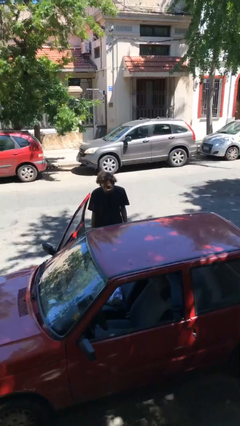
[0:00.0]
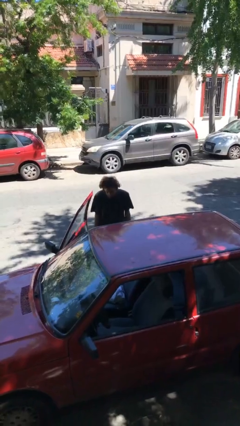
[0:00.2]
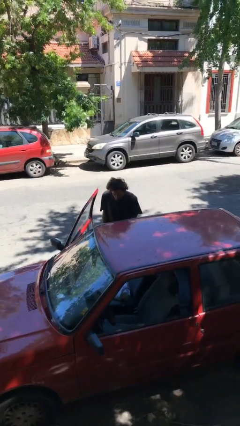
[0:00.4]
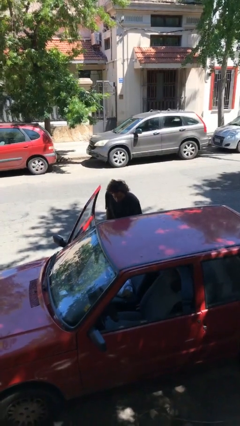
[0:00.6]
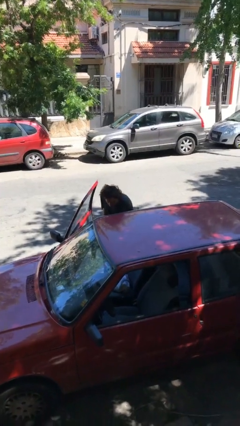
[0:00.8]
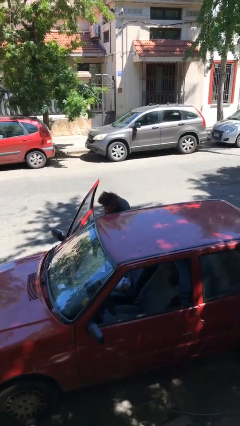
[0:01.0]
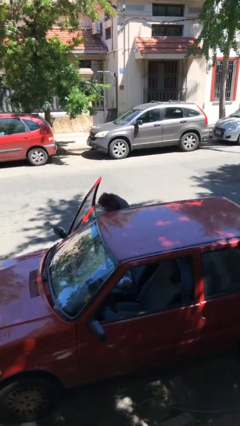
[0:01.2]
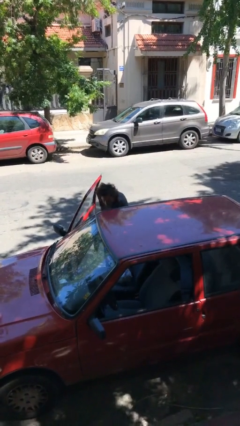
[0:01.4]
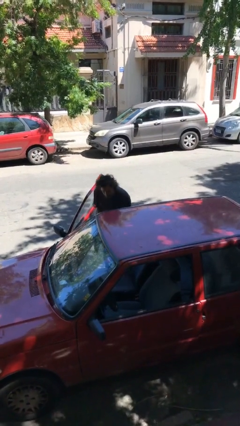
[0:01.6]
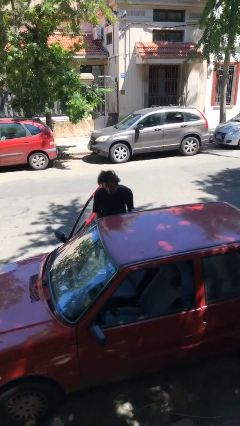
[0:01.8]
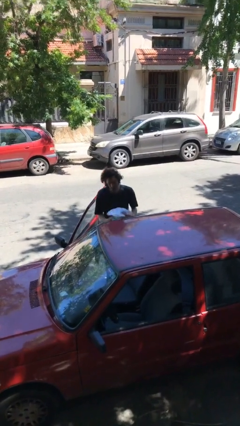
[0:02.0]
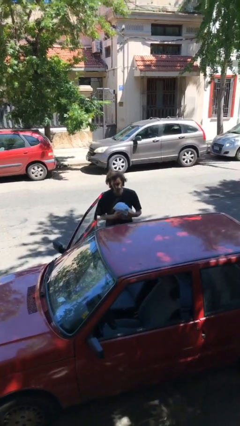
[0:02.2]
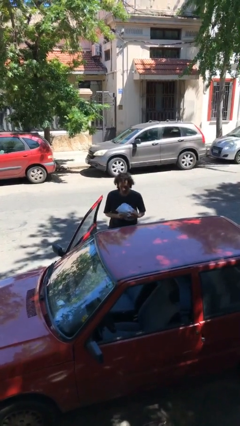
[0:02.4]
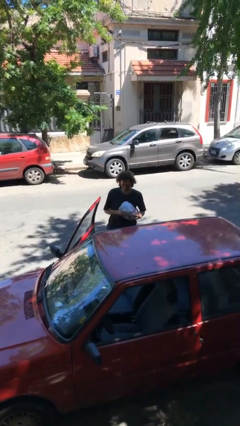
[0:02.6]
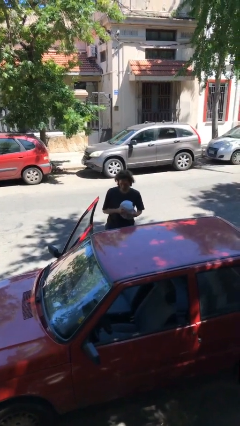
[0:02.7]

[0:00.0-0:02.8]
person unloads car

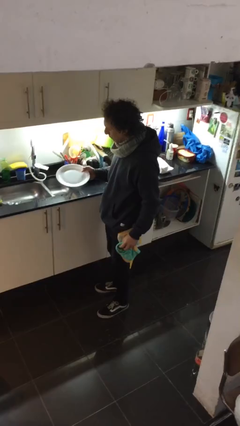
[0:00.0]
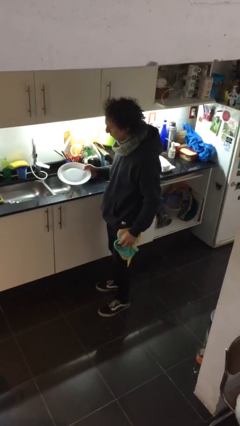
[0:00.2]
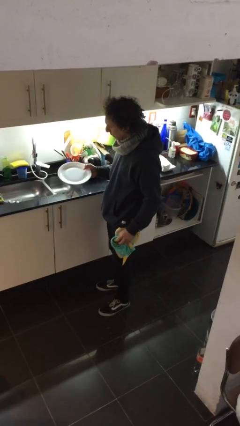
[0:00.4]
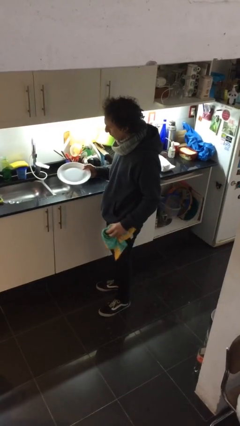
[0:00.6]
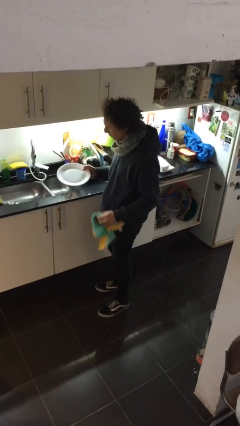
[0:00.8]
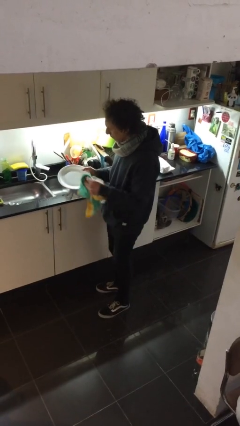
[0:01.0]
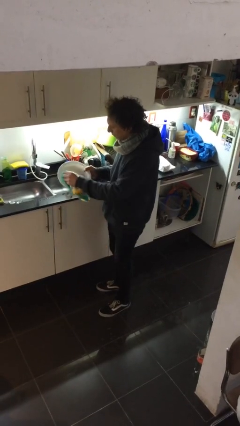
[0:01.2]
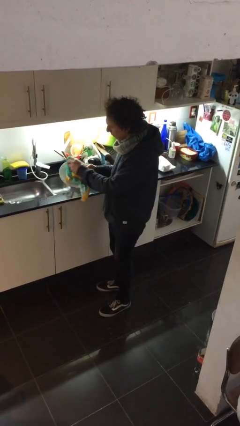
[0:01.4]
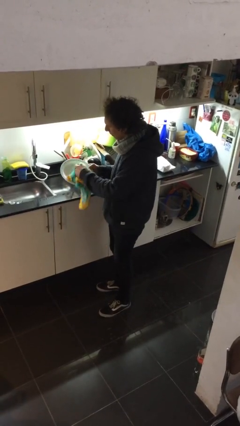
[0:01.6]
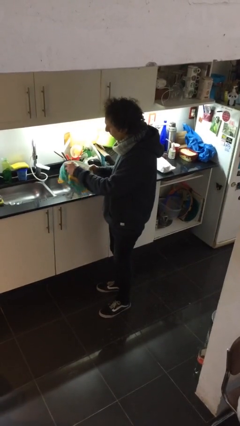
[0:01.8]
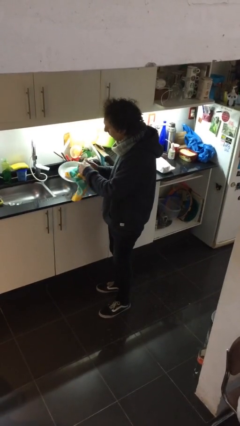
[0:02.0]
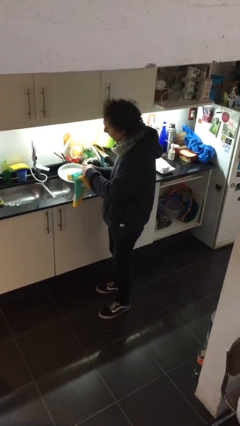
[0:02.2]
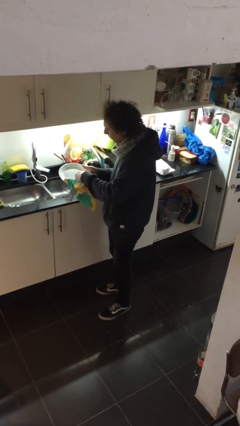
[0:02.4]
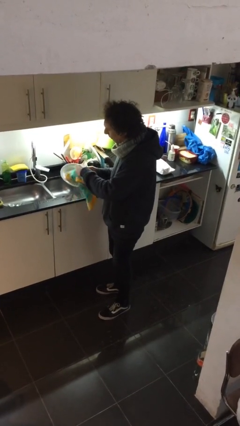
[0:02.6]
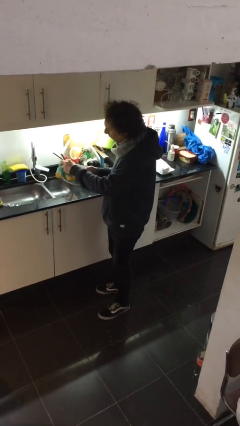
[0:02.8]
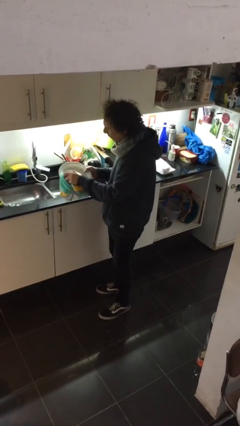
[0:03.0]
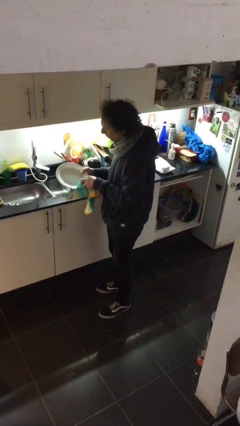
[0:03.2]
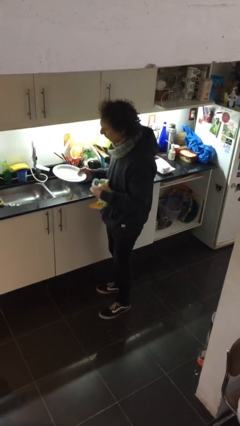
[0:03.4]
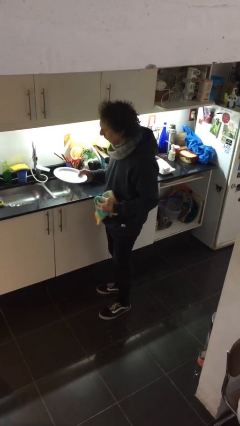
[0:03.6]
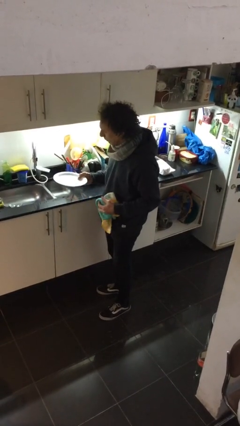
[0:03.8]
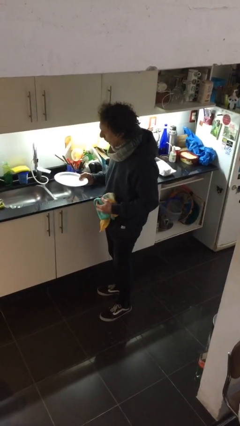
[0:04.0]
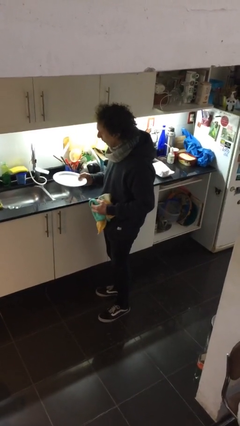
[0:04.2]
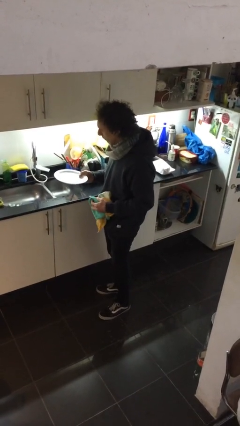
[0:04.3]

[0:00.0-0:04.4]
person dries dish

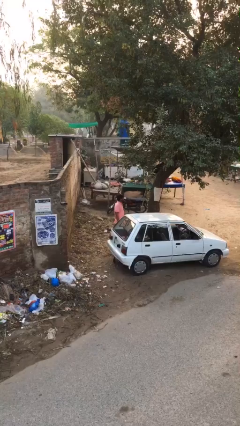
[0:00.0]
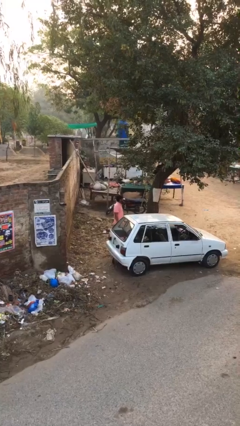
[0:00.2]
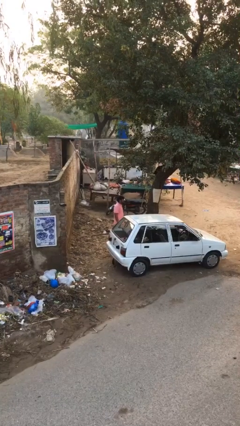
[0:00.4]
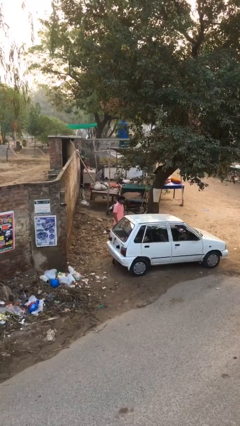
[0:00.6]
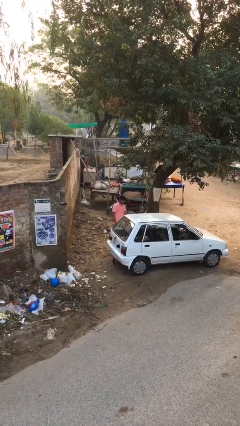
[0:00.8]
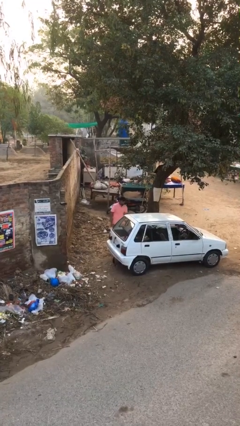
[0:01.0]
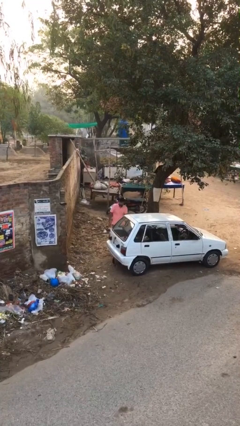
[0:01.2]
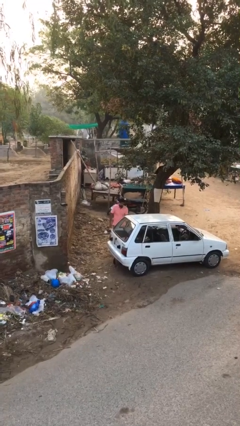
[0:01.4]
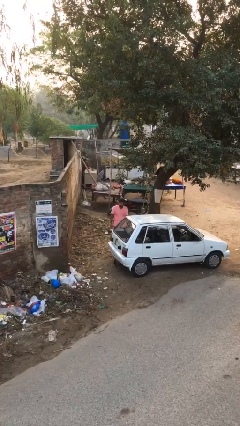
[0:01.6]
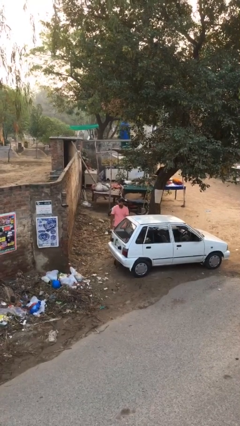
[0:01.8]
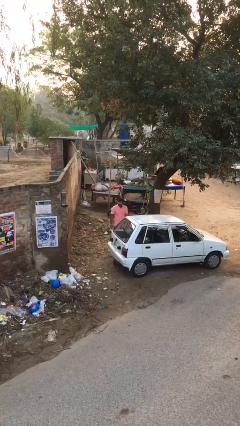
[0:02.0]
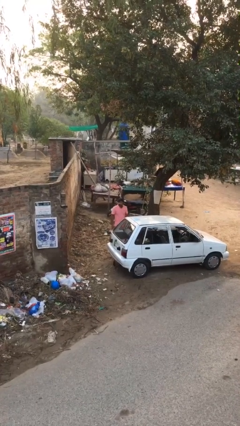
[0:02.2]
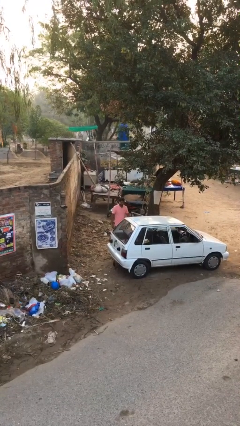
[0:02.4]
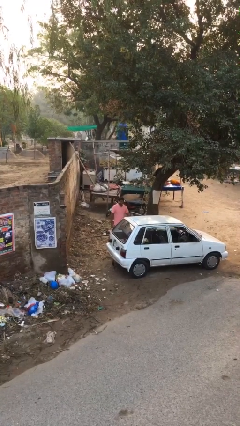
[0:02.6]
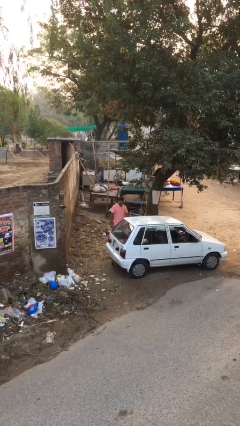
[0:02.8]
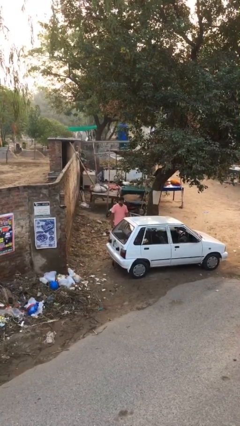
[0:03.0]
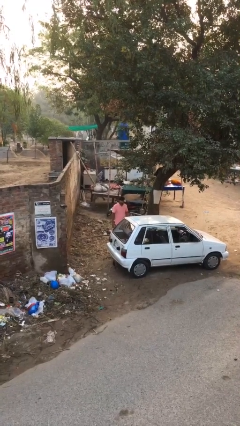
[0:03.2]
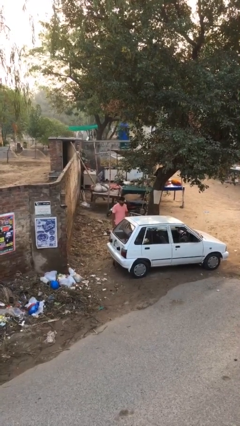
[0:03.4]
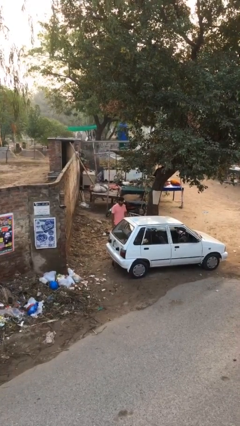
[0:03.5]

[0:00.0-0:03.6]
person opens car door

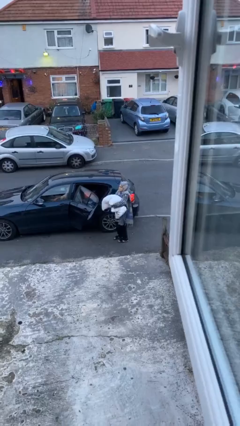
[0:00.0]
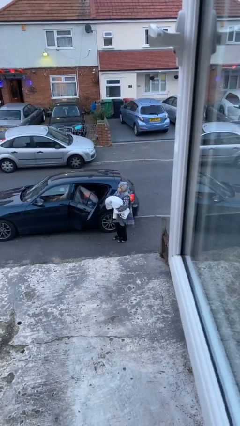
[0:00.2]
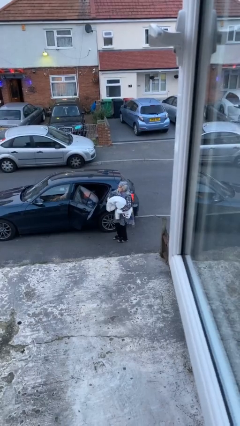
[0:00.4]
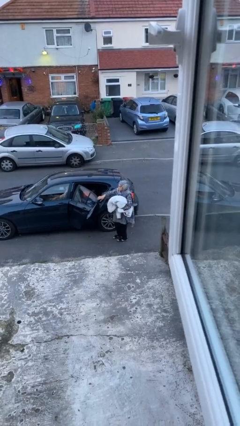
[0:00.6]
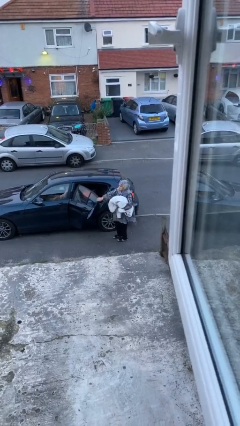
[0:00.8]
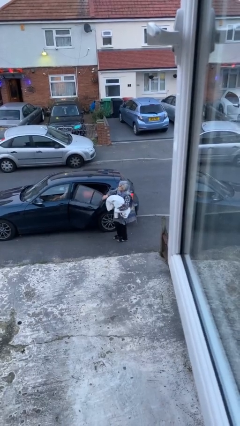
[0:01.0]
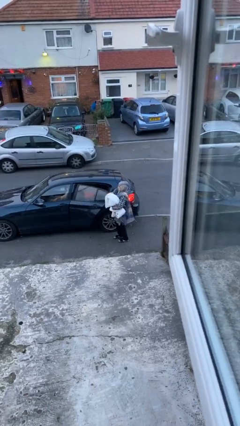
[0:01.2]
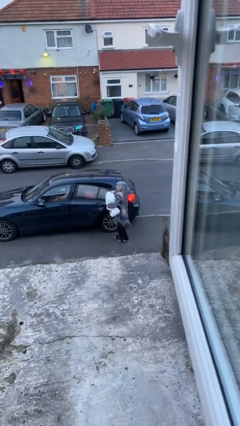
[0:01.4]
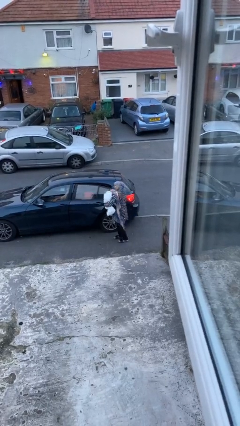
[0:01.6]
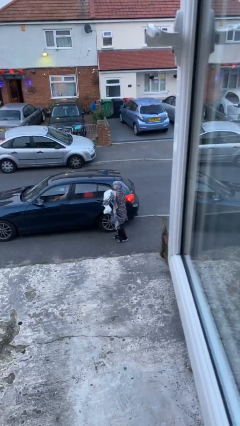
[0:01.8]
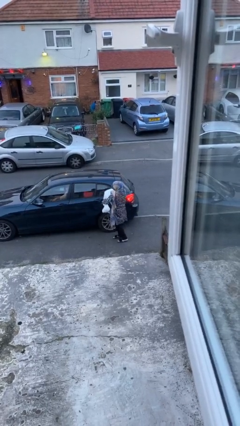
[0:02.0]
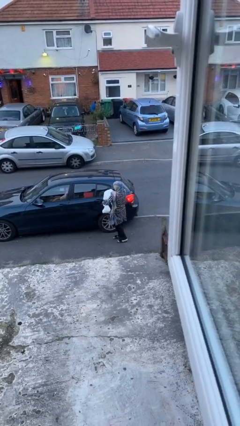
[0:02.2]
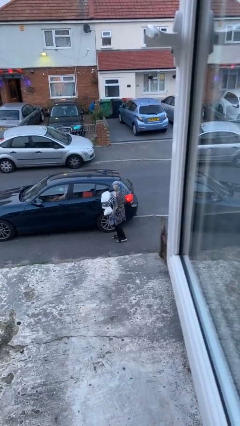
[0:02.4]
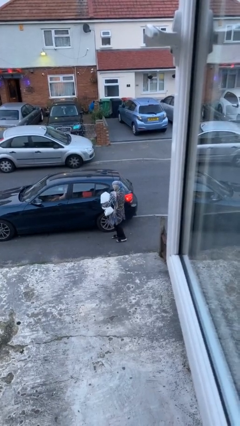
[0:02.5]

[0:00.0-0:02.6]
person closes car door

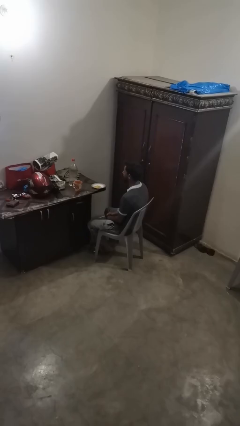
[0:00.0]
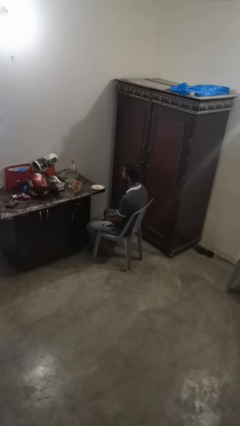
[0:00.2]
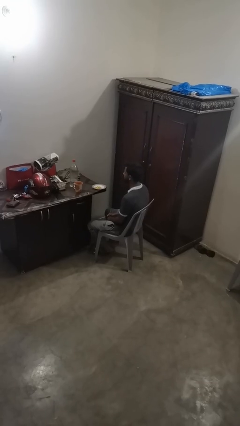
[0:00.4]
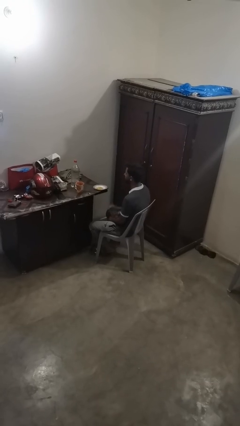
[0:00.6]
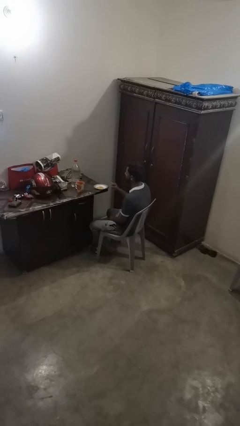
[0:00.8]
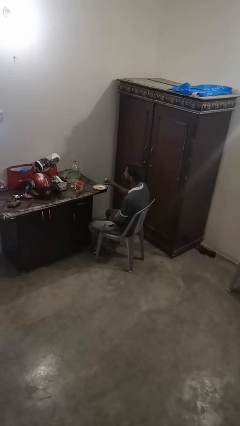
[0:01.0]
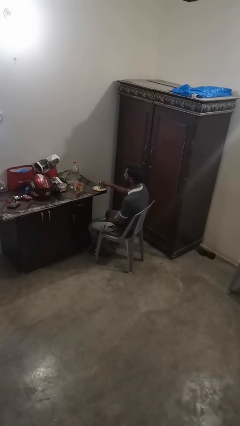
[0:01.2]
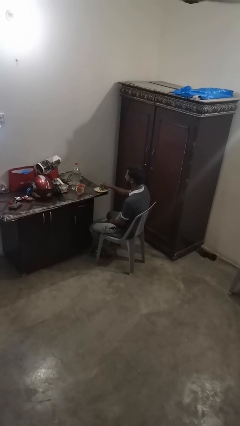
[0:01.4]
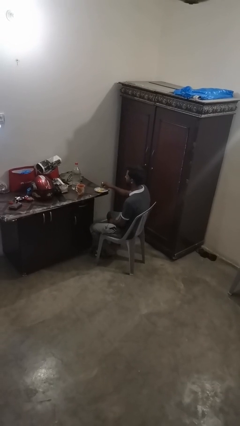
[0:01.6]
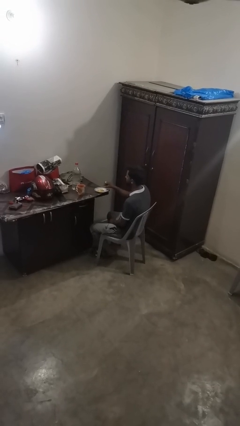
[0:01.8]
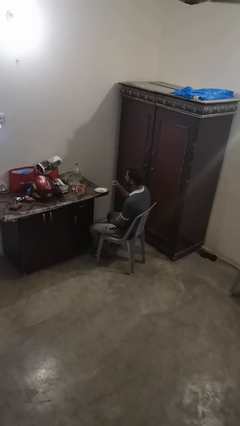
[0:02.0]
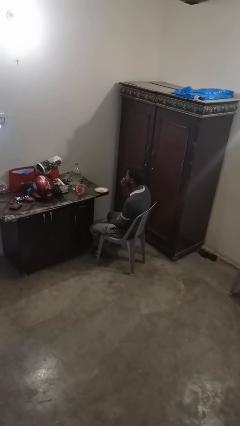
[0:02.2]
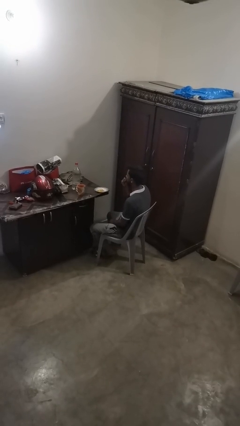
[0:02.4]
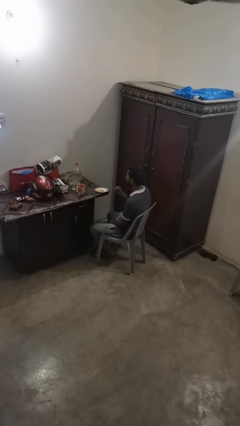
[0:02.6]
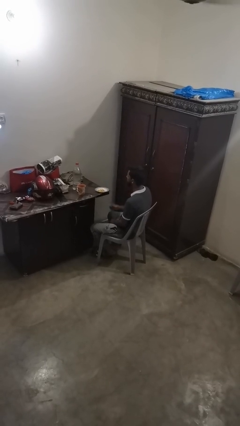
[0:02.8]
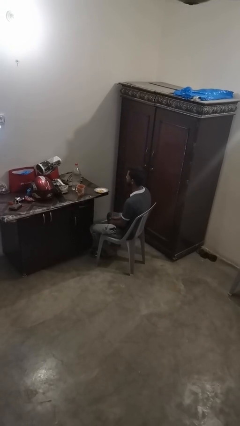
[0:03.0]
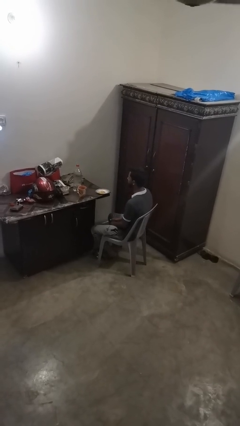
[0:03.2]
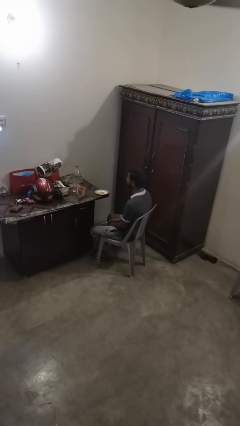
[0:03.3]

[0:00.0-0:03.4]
person eats with hands

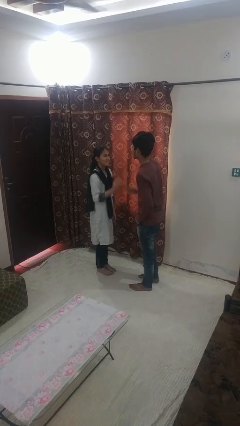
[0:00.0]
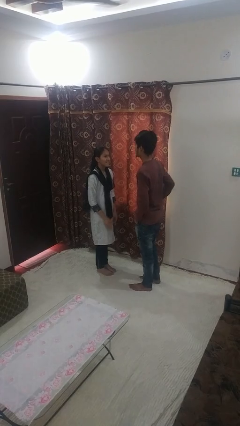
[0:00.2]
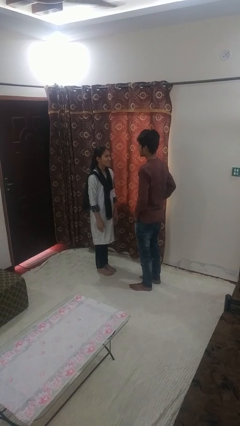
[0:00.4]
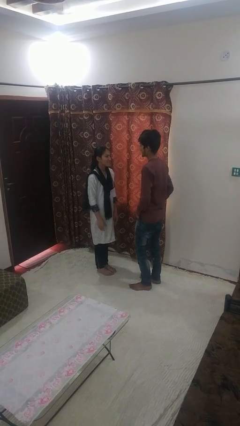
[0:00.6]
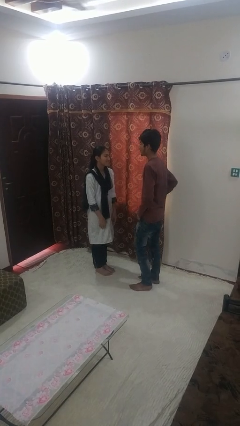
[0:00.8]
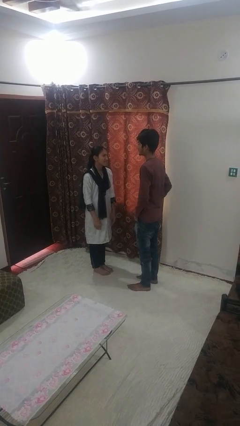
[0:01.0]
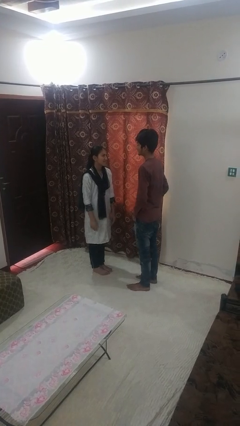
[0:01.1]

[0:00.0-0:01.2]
person highfives hand
